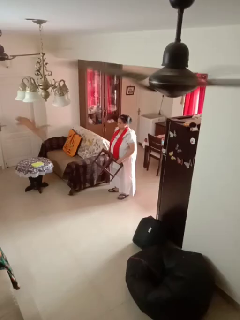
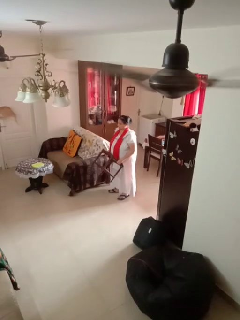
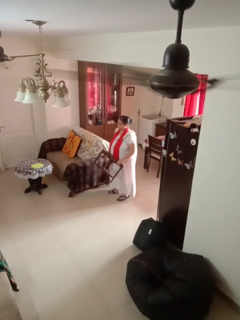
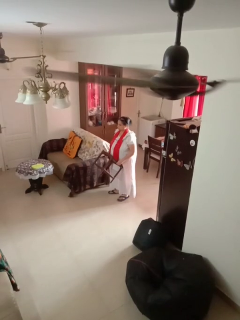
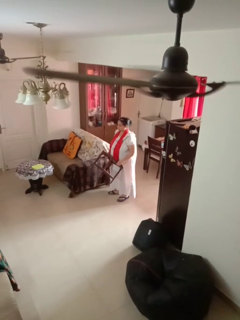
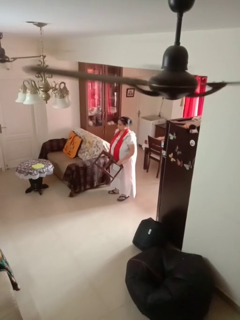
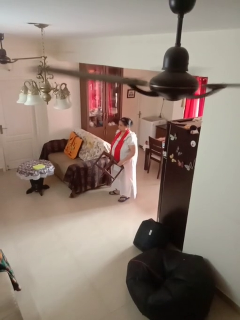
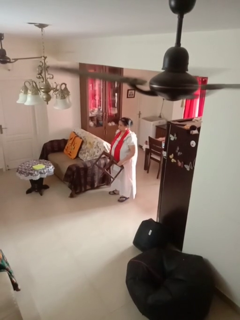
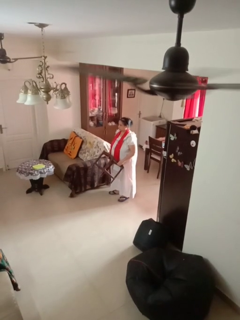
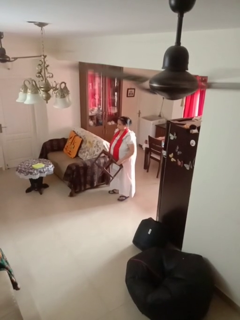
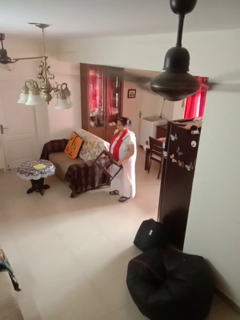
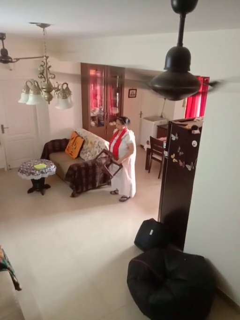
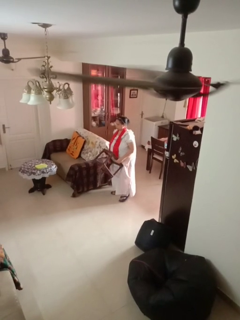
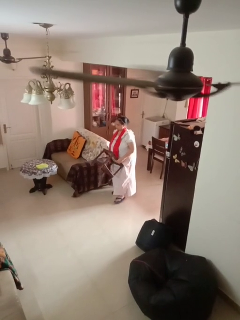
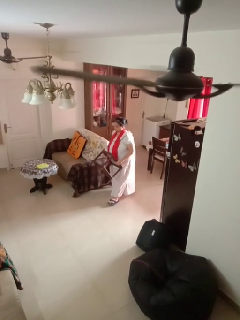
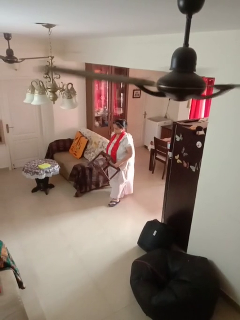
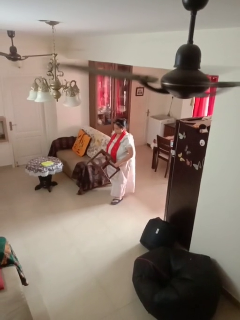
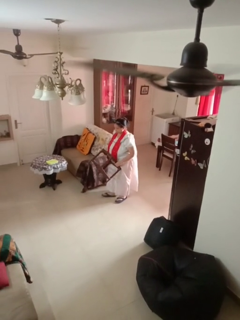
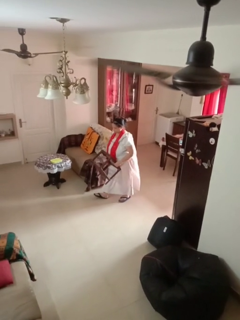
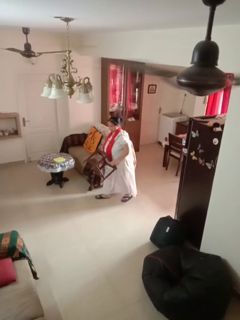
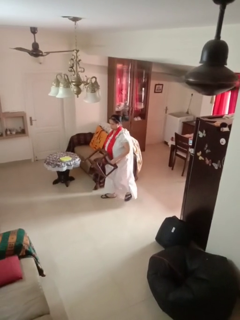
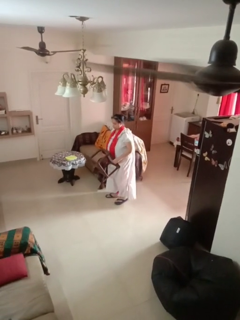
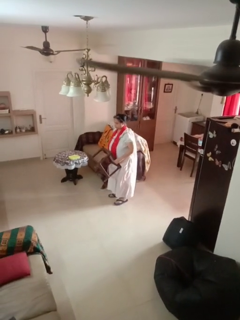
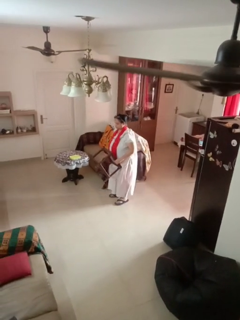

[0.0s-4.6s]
person carries furniture

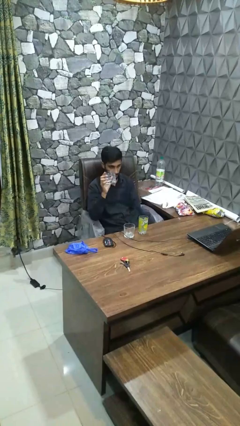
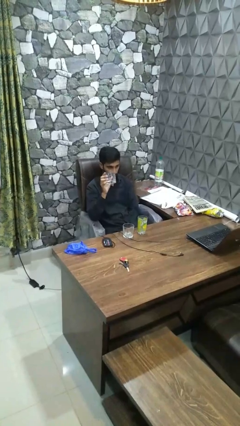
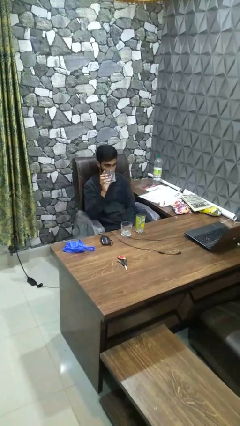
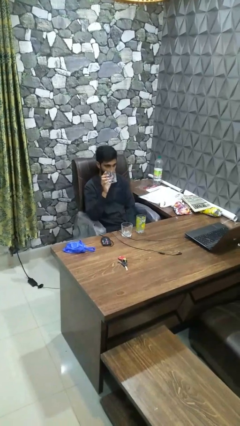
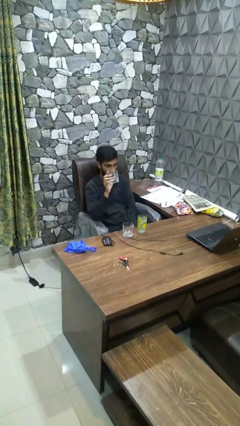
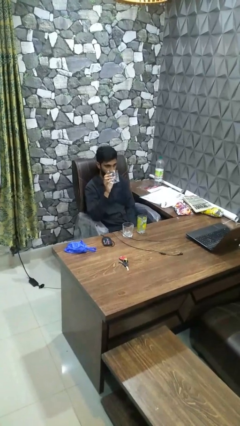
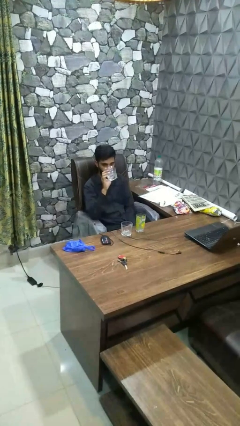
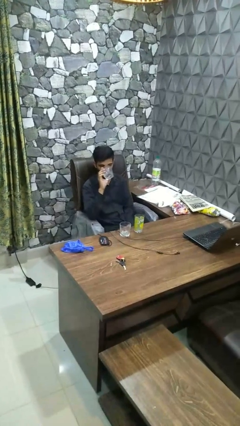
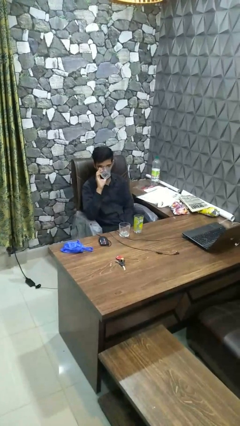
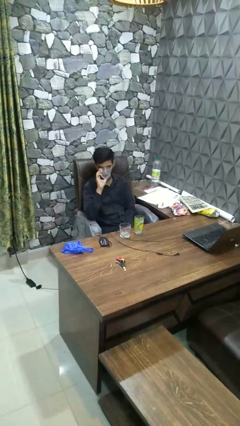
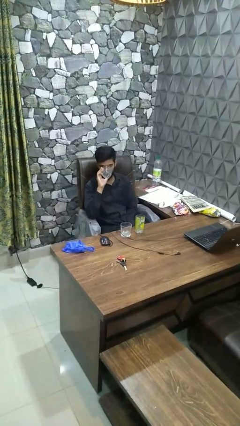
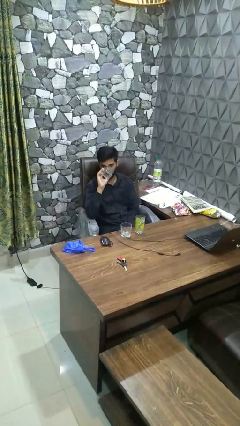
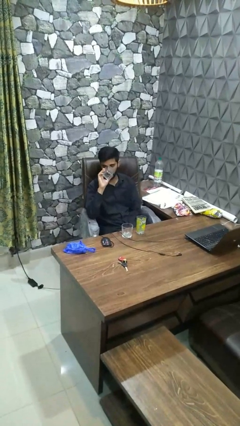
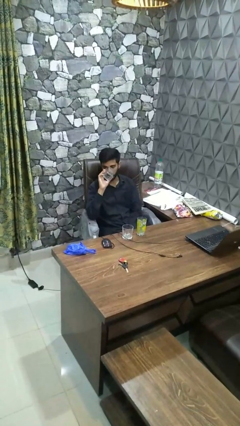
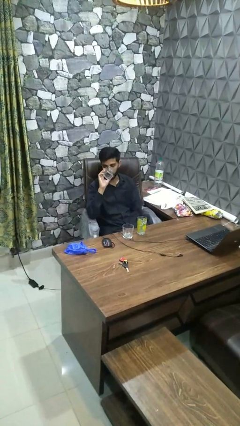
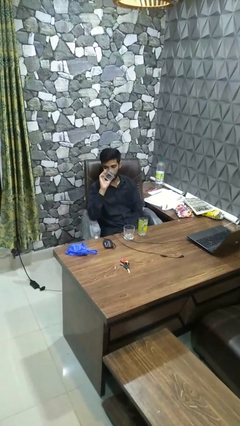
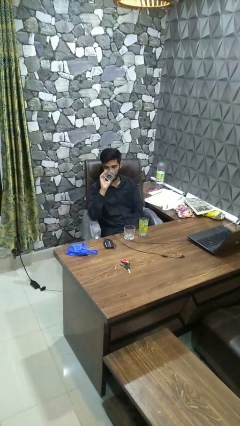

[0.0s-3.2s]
person drinks from shotglass

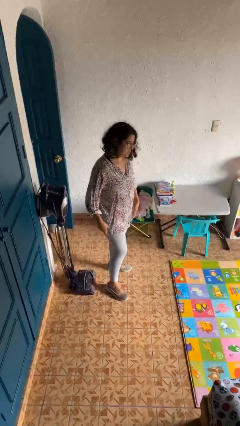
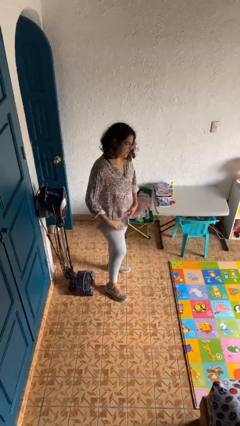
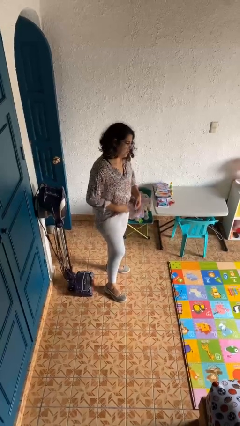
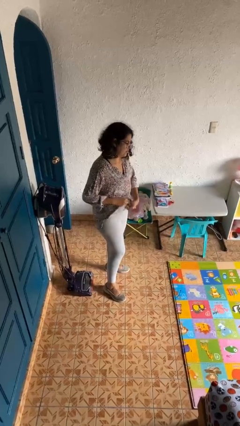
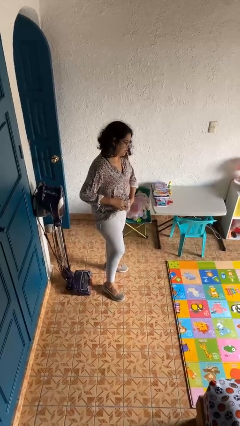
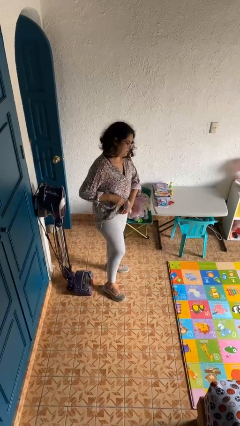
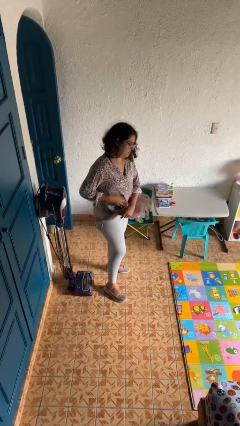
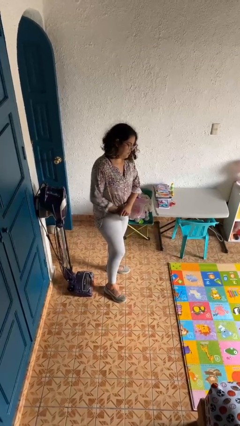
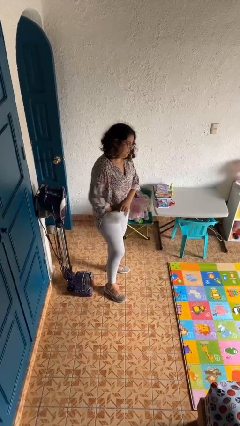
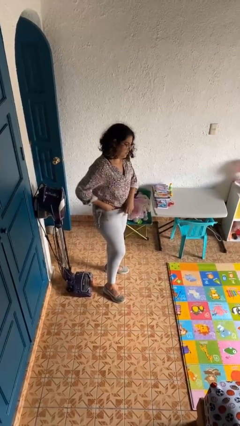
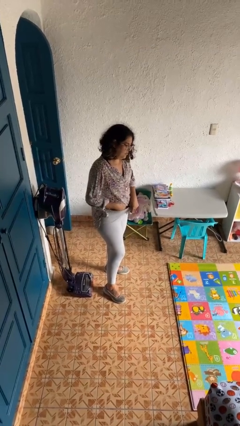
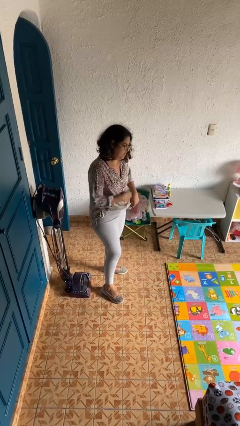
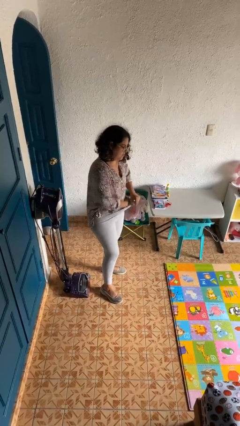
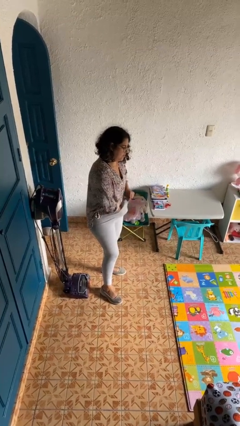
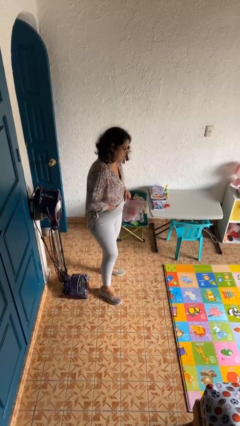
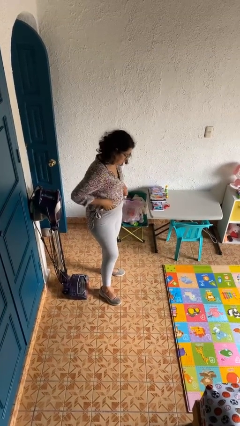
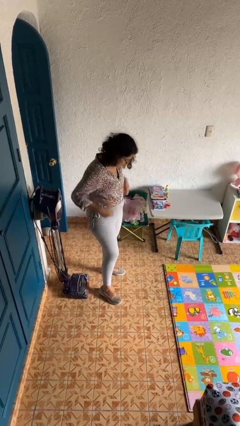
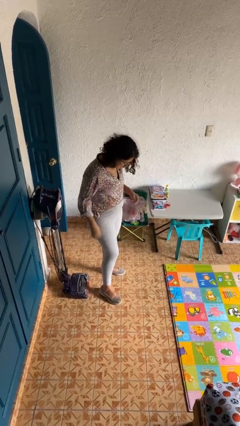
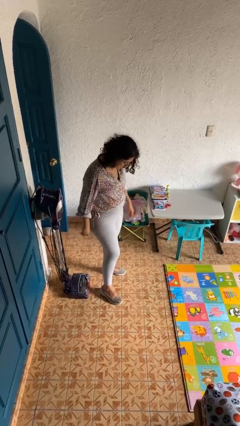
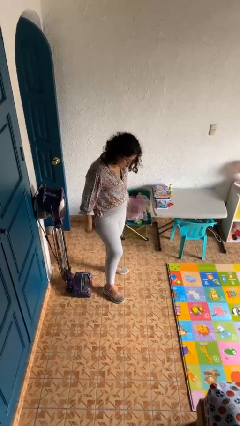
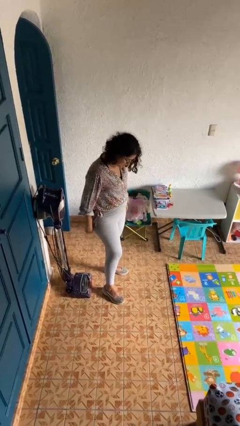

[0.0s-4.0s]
person tucks in shirt

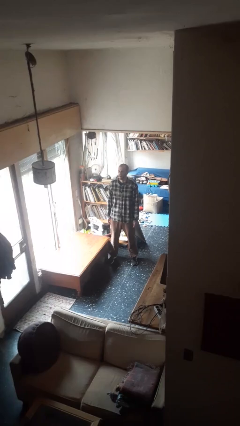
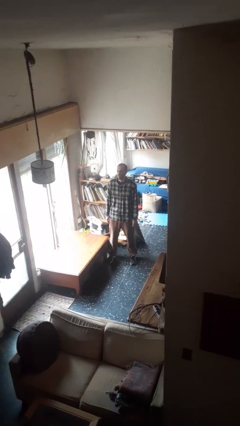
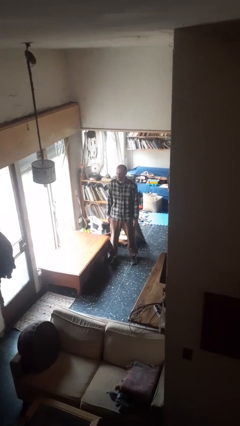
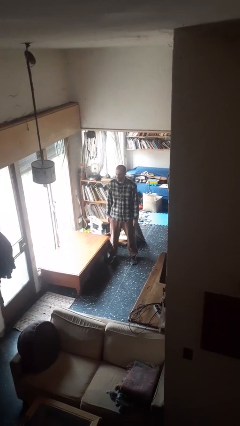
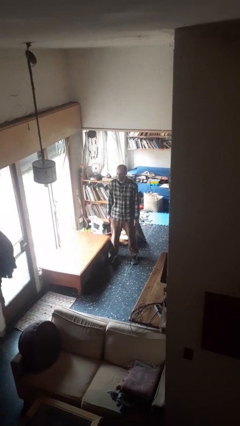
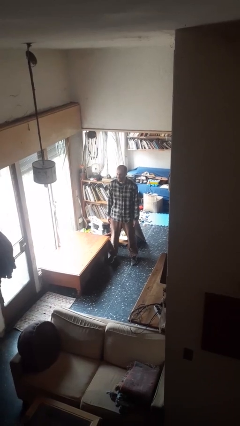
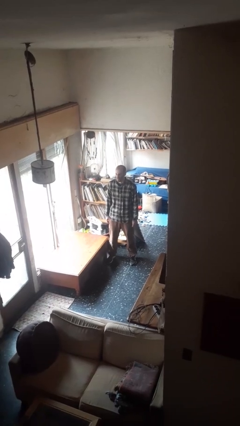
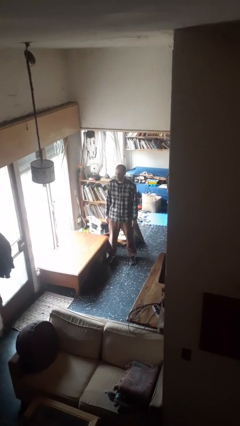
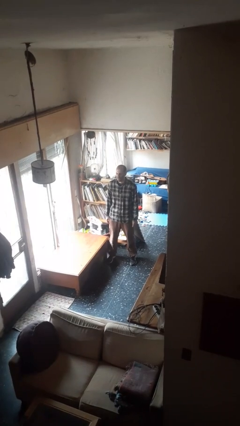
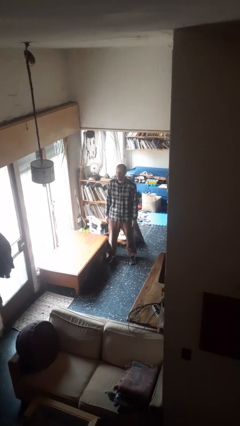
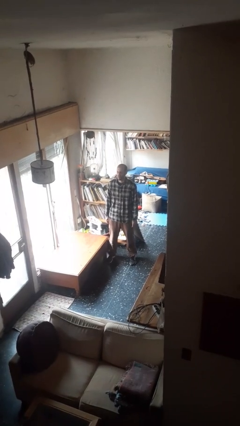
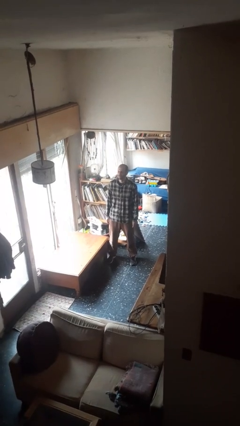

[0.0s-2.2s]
person sticks out tongue

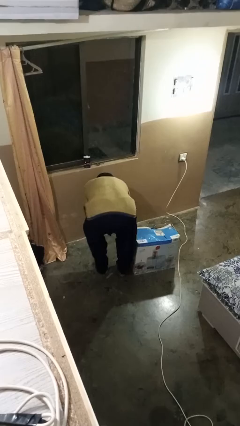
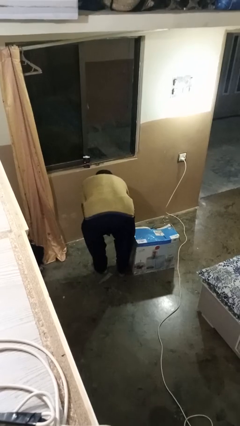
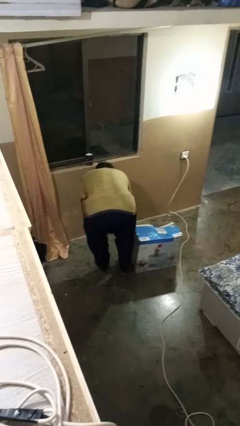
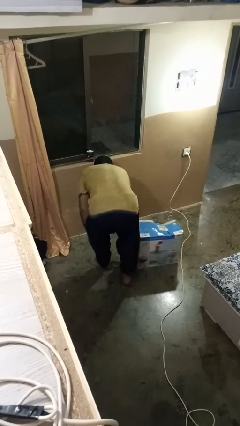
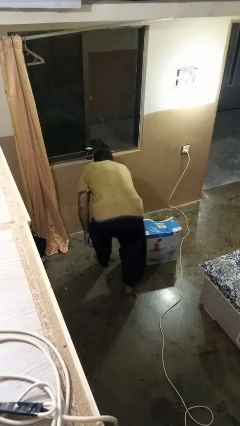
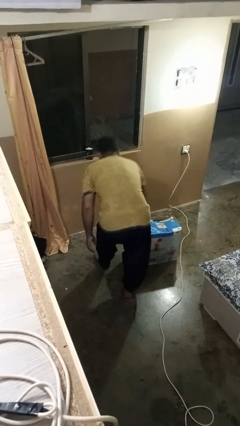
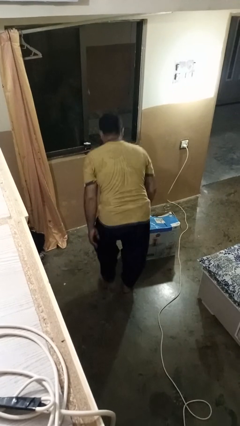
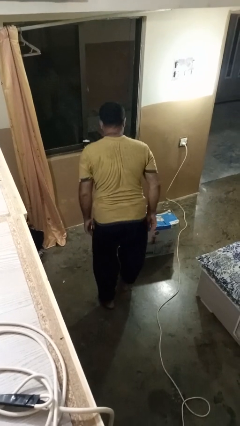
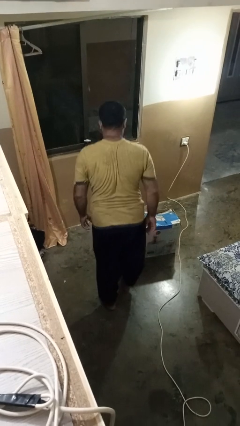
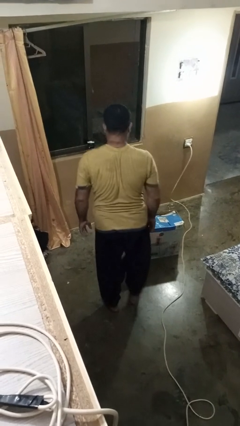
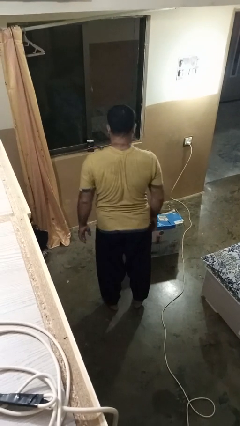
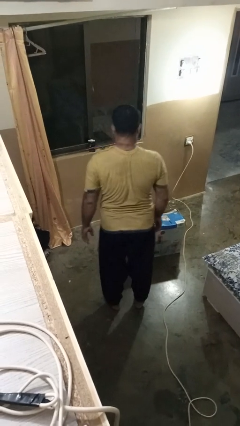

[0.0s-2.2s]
person stands up from floor

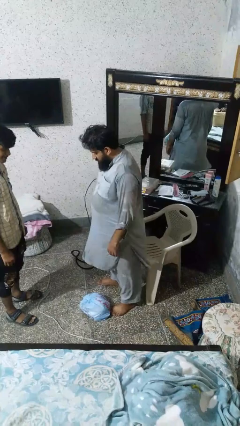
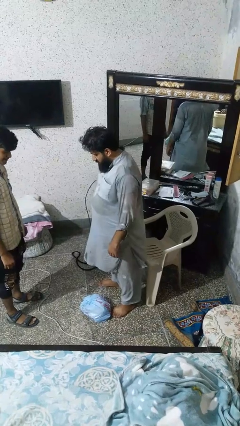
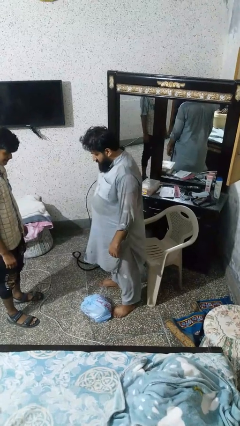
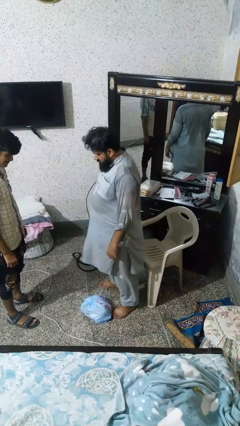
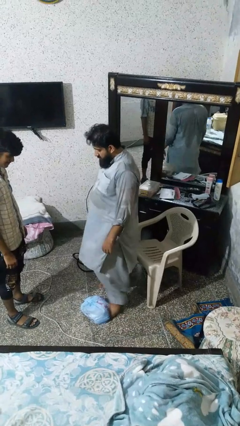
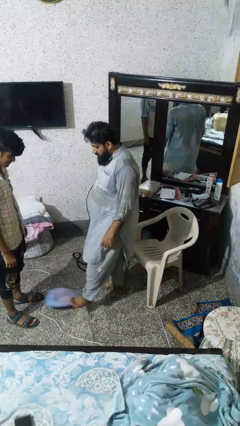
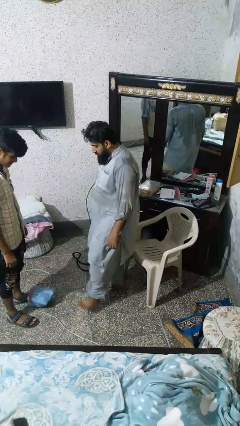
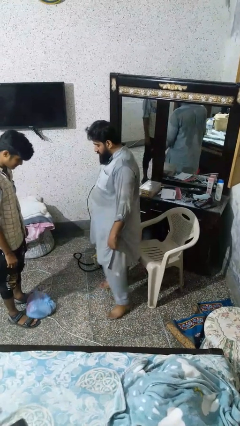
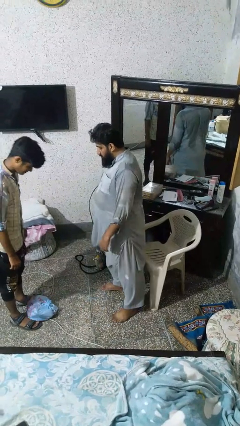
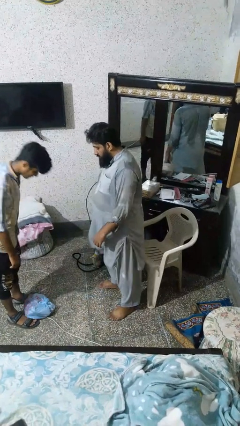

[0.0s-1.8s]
person kicks object to person

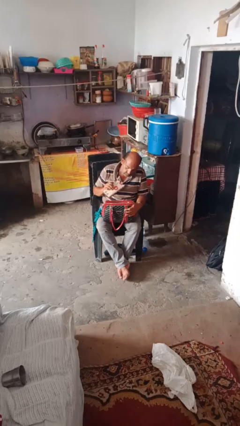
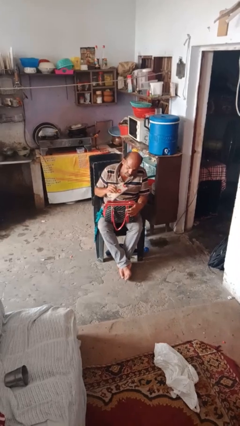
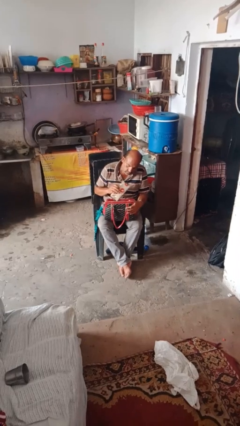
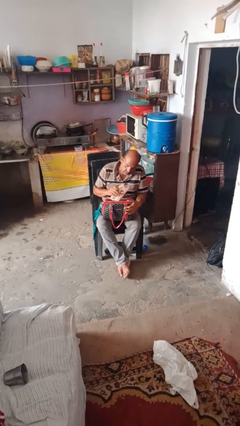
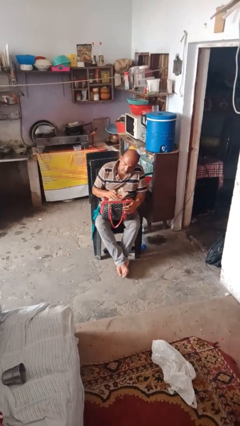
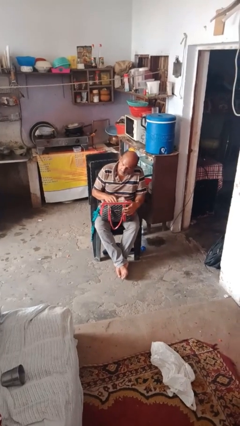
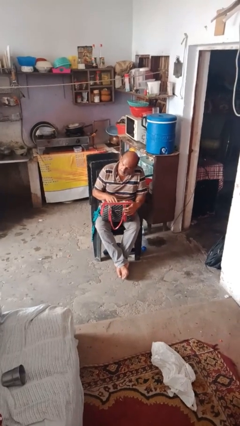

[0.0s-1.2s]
person puts object into purse
